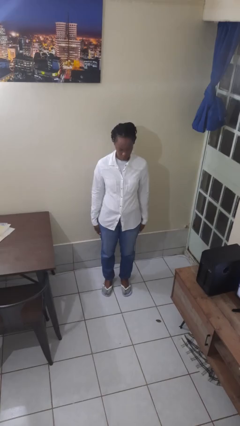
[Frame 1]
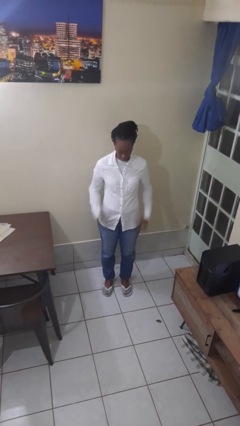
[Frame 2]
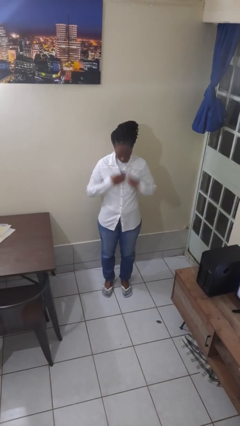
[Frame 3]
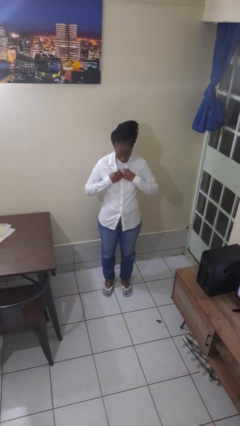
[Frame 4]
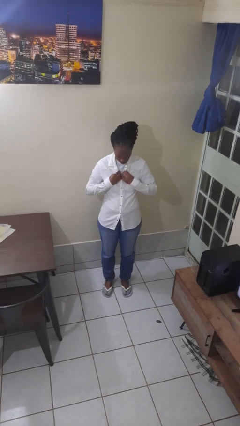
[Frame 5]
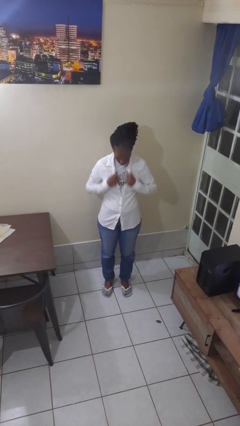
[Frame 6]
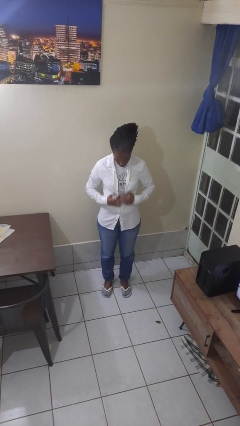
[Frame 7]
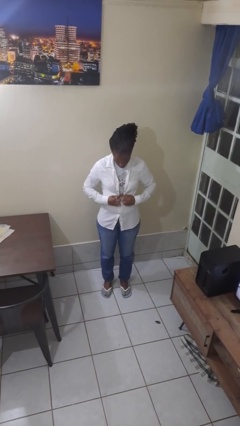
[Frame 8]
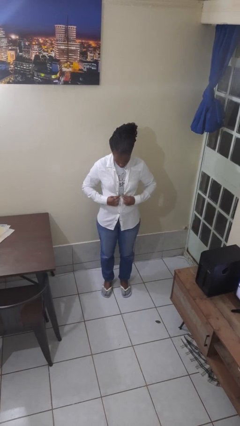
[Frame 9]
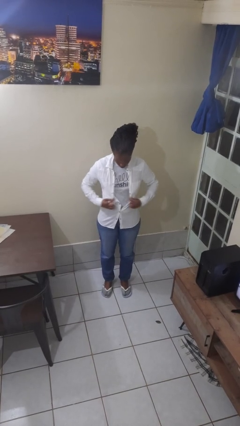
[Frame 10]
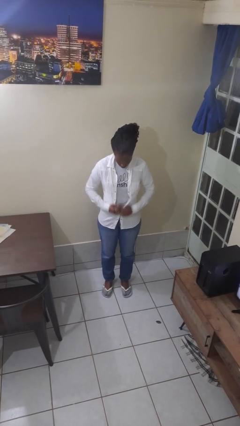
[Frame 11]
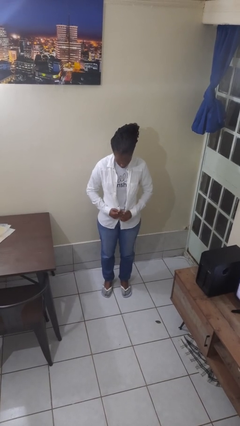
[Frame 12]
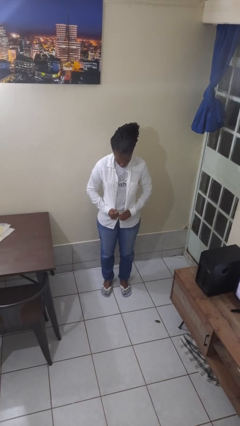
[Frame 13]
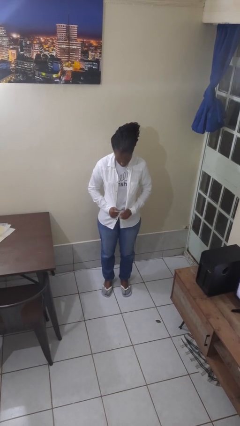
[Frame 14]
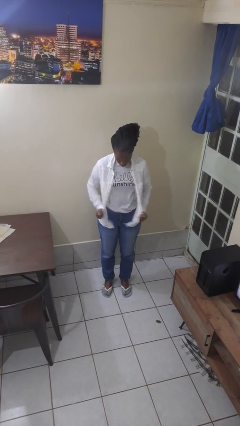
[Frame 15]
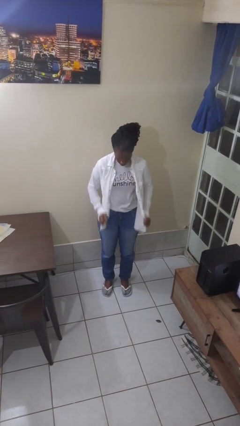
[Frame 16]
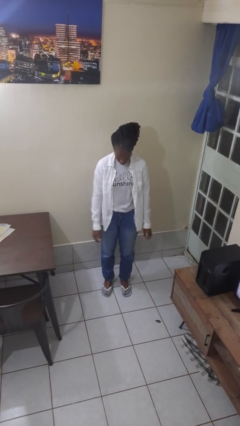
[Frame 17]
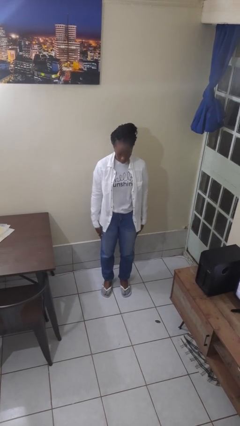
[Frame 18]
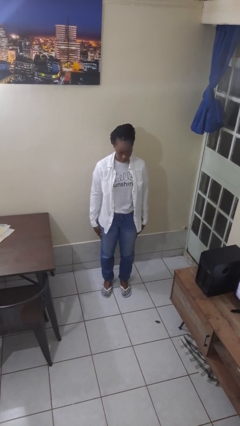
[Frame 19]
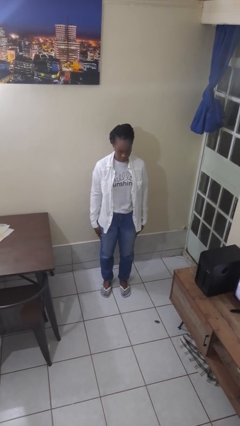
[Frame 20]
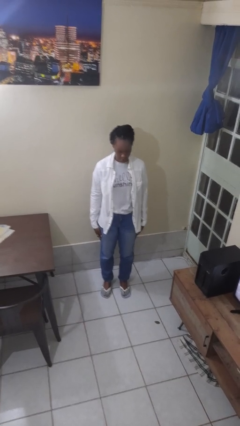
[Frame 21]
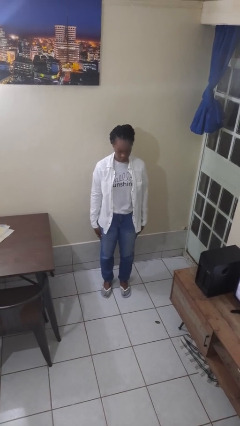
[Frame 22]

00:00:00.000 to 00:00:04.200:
person unbuttons shirt

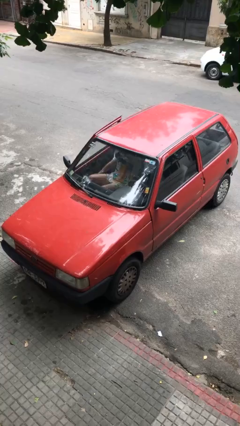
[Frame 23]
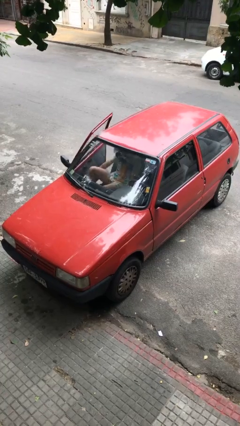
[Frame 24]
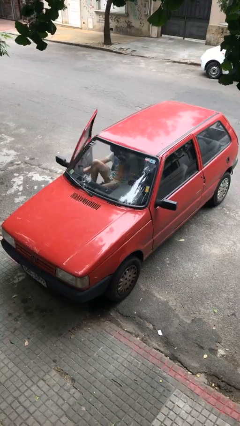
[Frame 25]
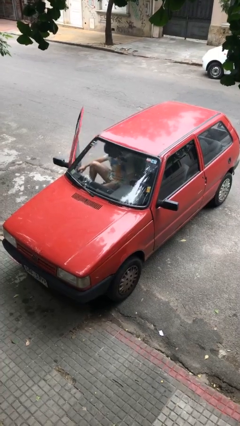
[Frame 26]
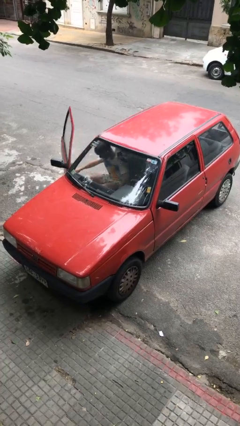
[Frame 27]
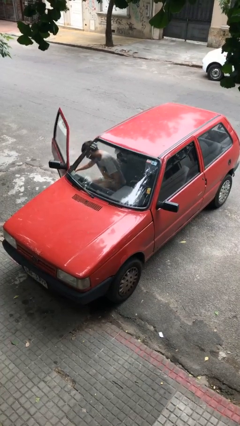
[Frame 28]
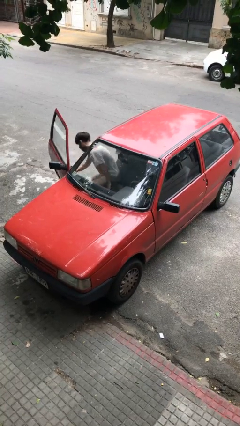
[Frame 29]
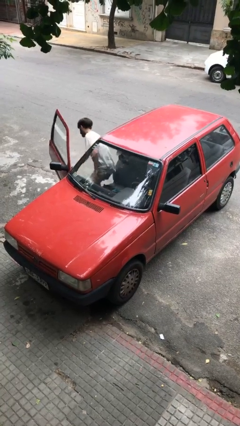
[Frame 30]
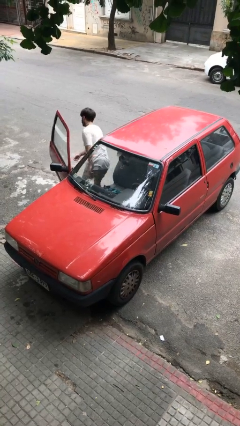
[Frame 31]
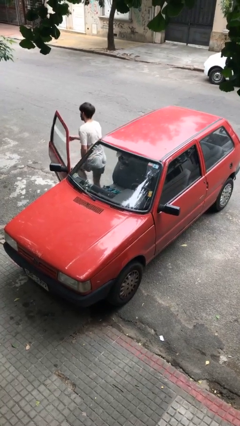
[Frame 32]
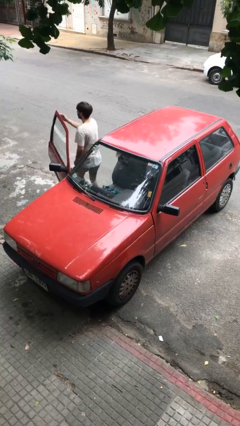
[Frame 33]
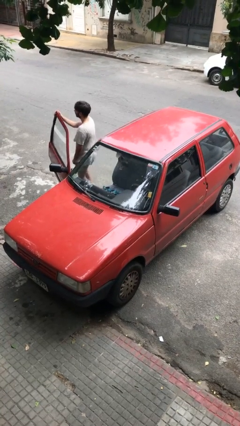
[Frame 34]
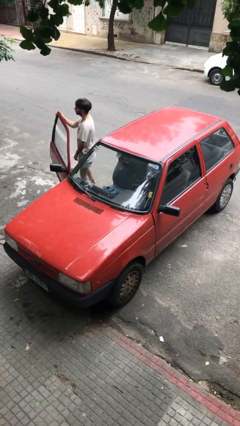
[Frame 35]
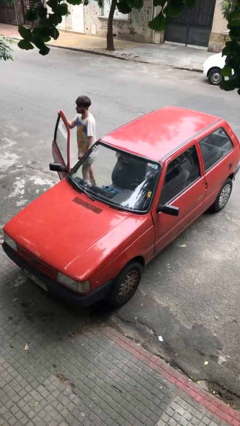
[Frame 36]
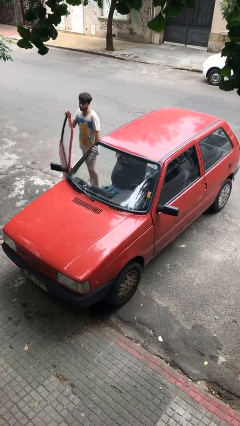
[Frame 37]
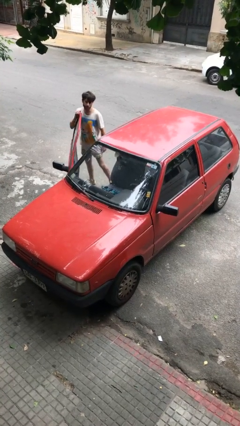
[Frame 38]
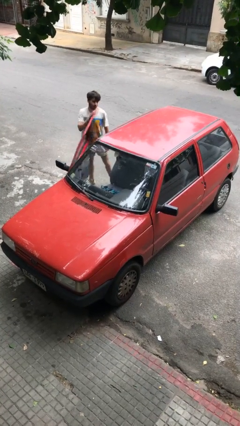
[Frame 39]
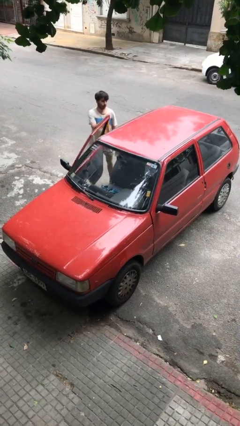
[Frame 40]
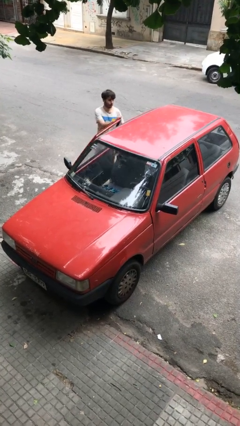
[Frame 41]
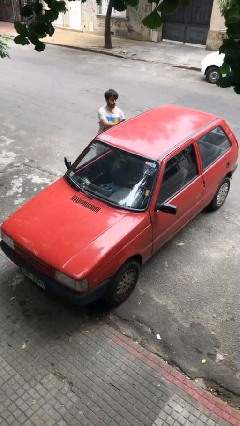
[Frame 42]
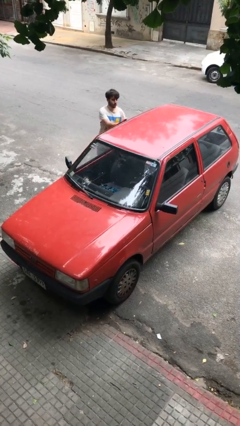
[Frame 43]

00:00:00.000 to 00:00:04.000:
car drops off person

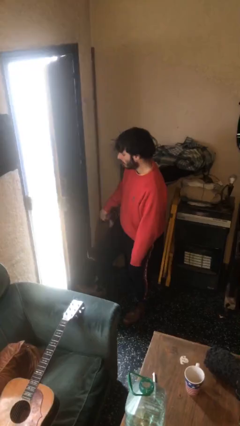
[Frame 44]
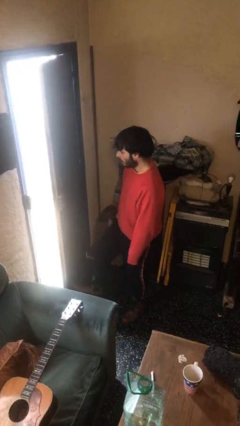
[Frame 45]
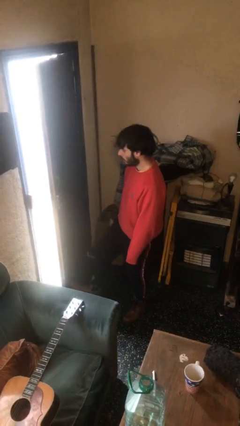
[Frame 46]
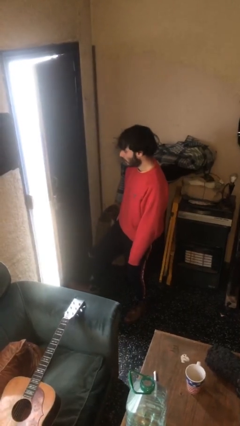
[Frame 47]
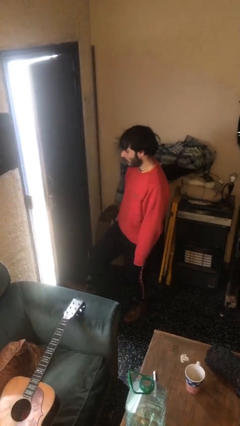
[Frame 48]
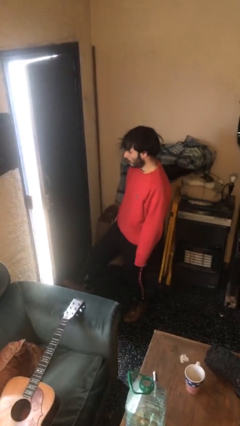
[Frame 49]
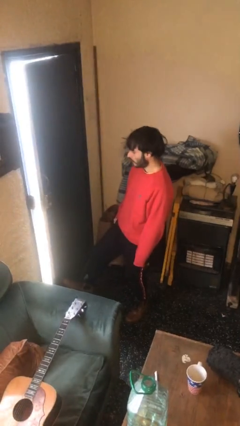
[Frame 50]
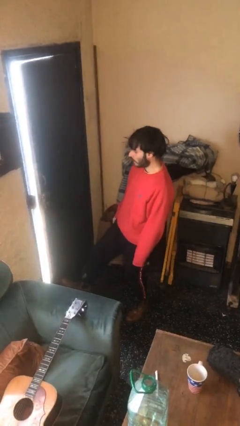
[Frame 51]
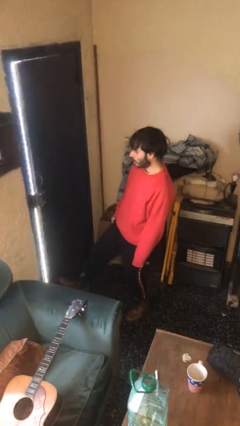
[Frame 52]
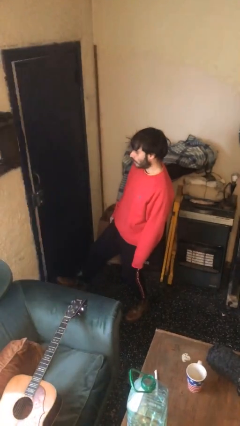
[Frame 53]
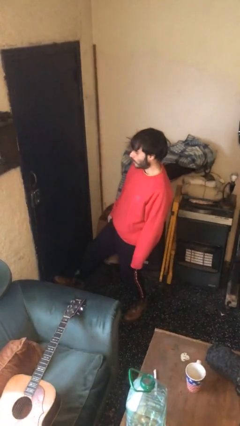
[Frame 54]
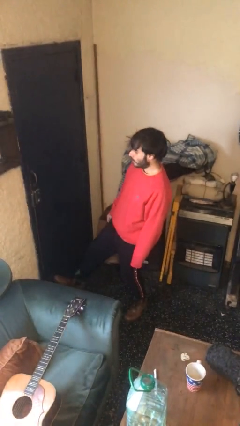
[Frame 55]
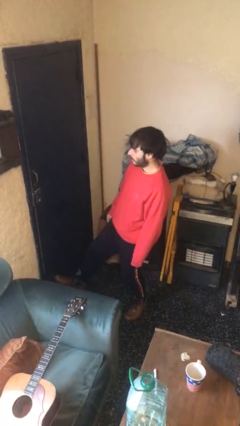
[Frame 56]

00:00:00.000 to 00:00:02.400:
person closes door with foot

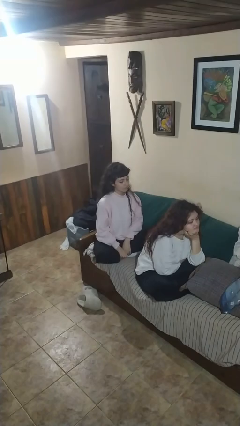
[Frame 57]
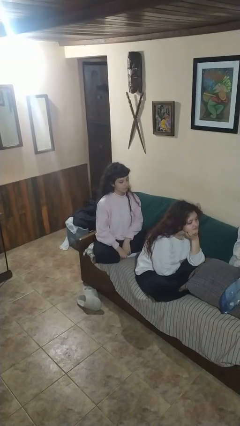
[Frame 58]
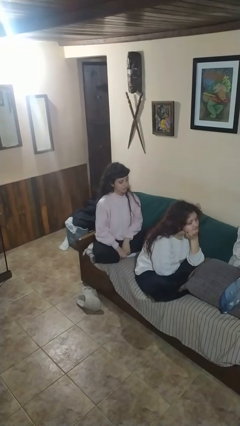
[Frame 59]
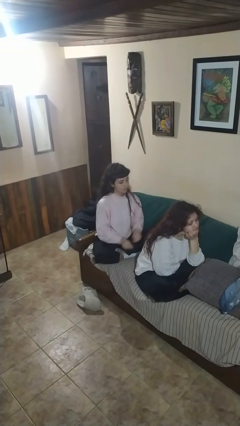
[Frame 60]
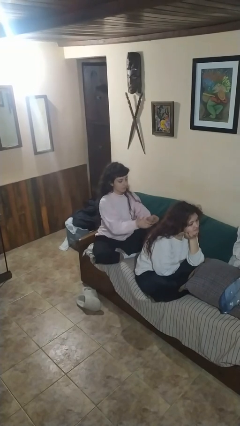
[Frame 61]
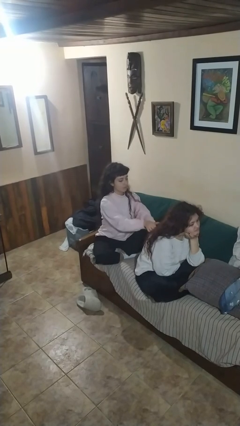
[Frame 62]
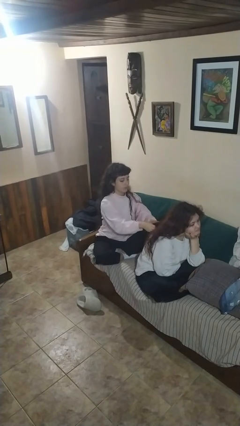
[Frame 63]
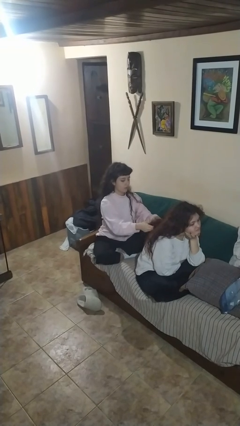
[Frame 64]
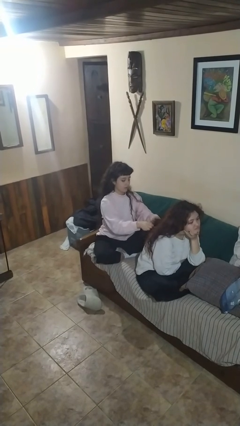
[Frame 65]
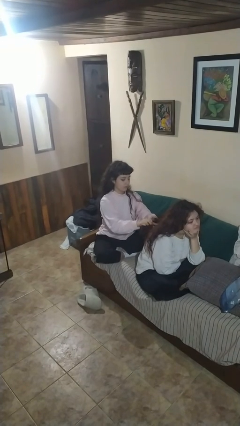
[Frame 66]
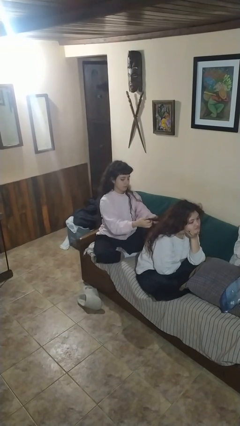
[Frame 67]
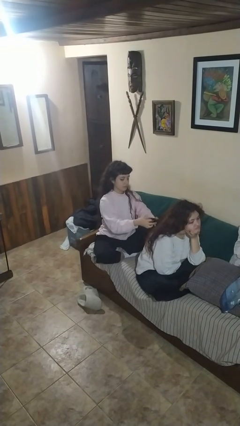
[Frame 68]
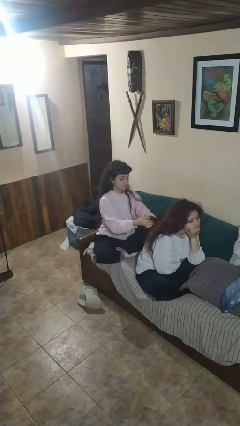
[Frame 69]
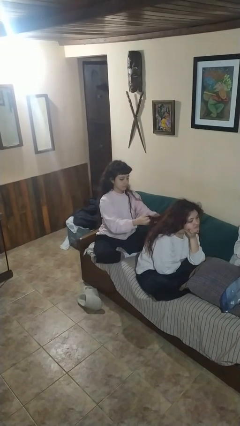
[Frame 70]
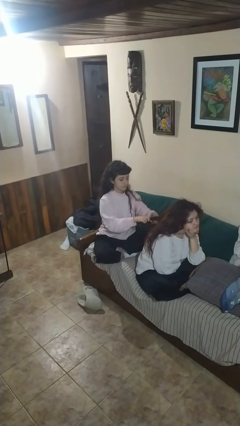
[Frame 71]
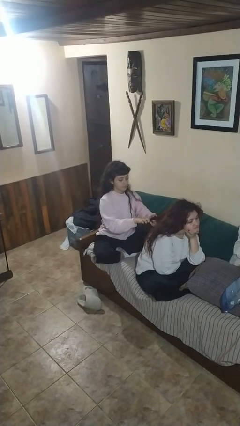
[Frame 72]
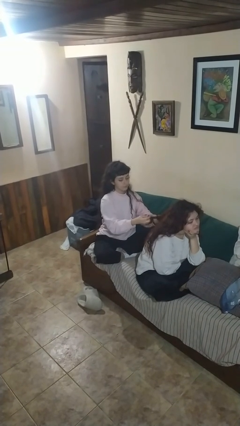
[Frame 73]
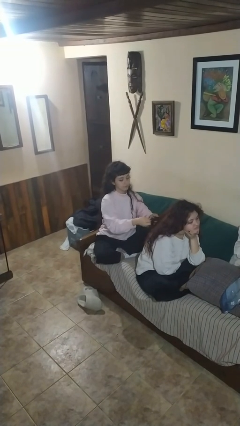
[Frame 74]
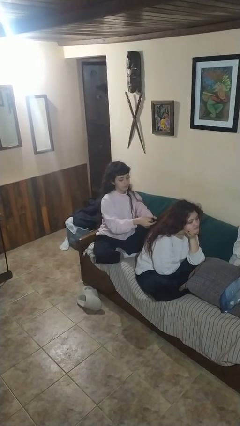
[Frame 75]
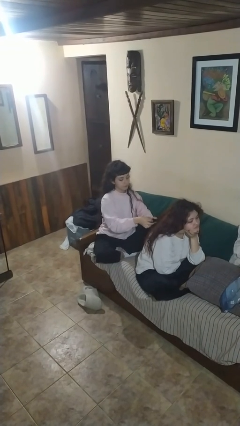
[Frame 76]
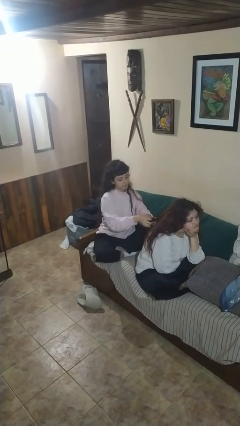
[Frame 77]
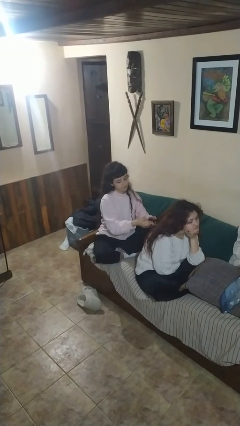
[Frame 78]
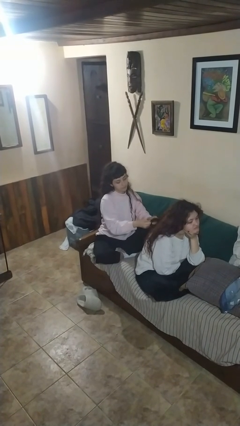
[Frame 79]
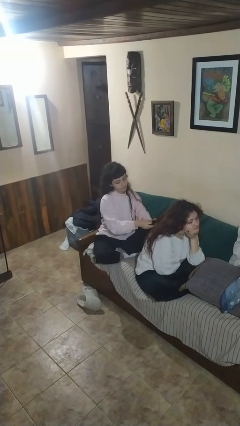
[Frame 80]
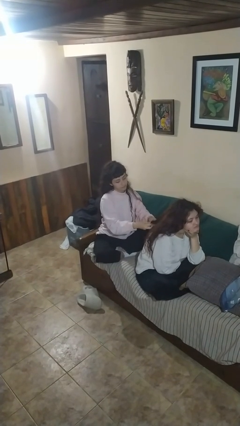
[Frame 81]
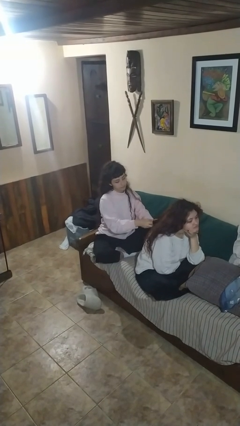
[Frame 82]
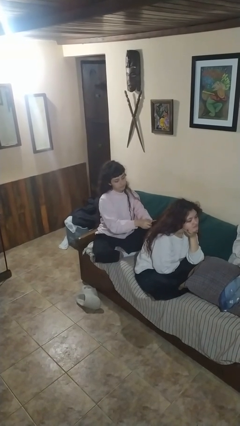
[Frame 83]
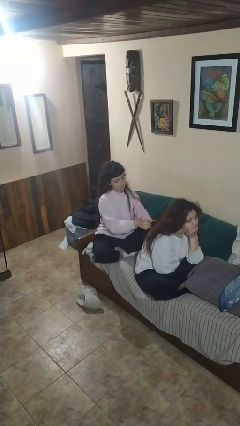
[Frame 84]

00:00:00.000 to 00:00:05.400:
person braids hair of person

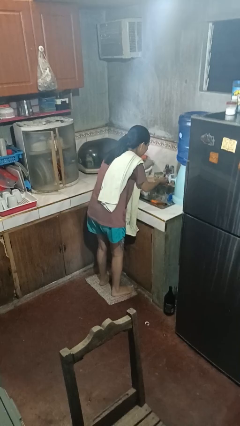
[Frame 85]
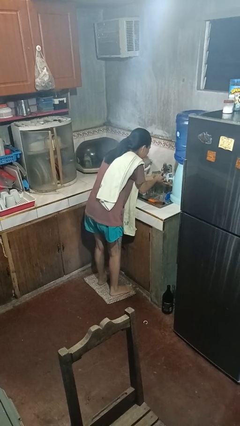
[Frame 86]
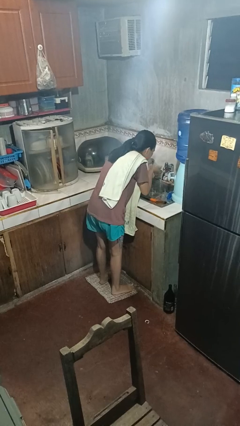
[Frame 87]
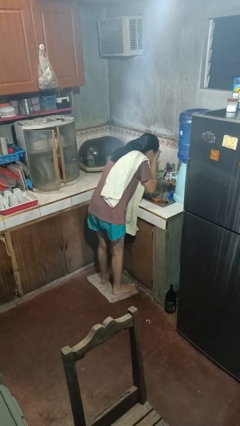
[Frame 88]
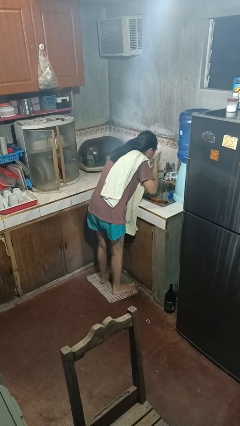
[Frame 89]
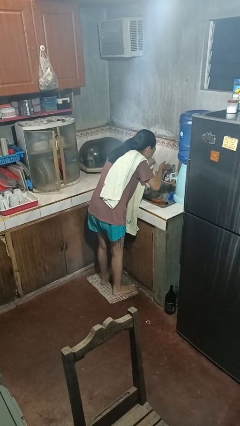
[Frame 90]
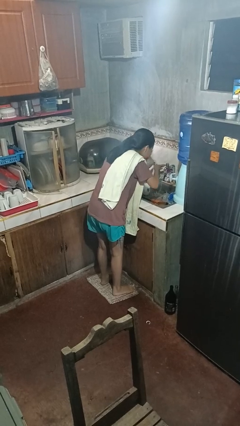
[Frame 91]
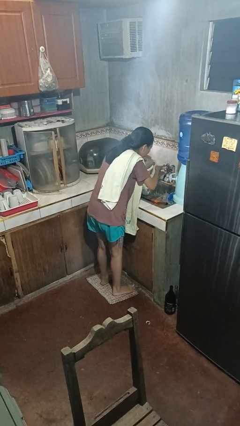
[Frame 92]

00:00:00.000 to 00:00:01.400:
person washes face
